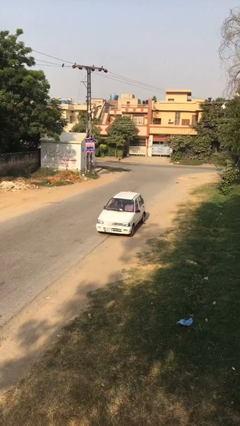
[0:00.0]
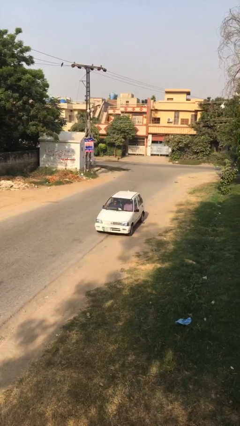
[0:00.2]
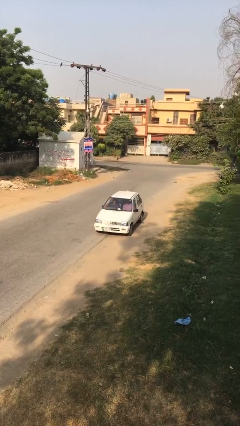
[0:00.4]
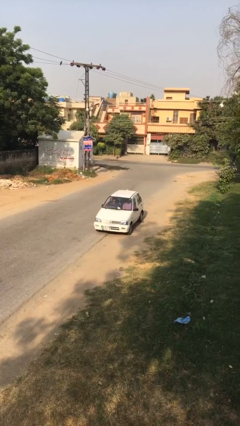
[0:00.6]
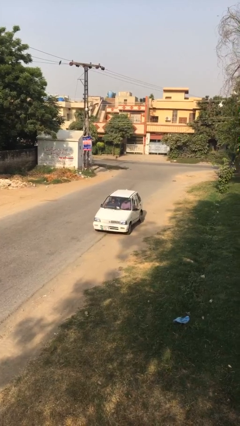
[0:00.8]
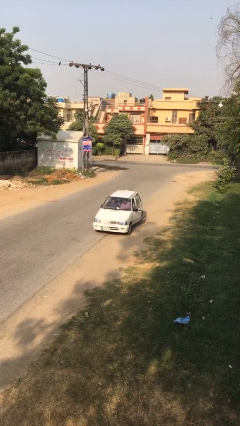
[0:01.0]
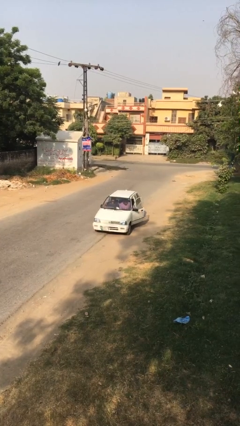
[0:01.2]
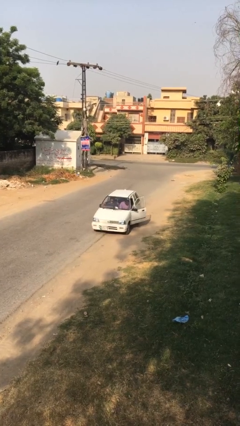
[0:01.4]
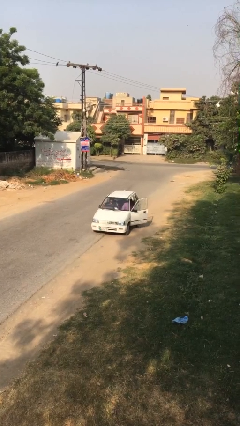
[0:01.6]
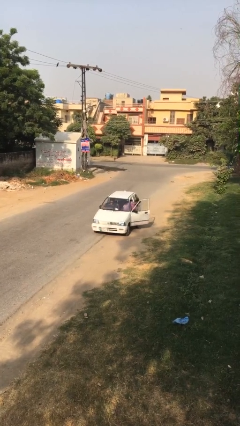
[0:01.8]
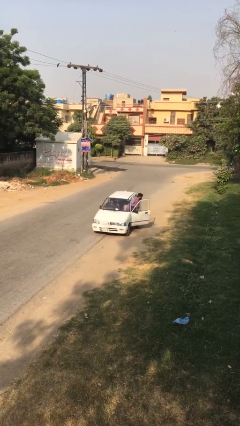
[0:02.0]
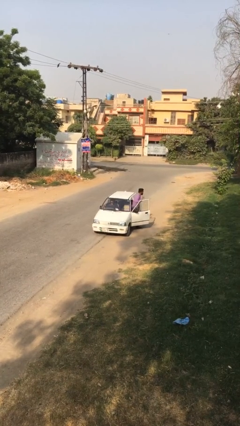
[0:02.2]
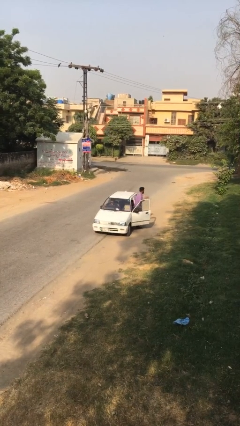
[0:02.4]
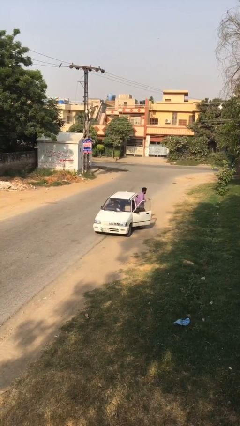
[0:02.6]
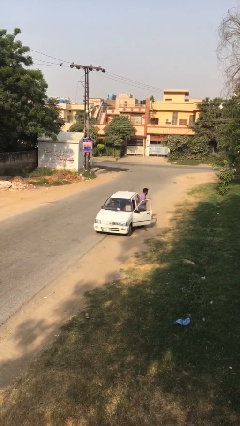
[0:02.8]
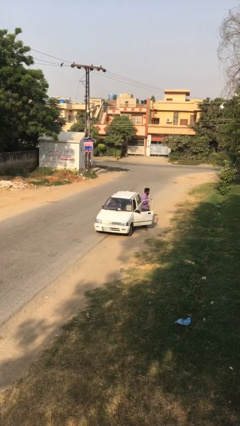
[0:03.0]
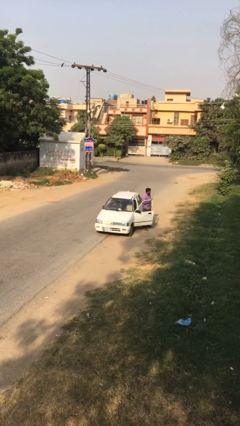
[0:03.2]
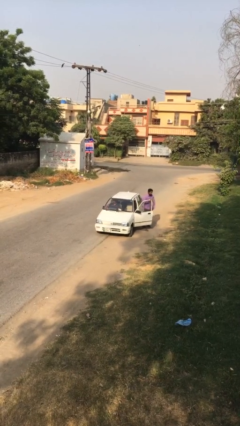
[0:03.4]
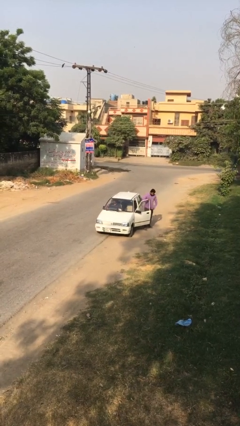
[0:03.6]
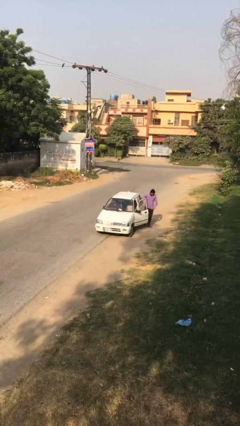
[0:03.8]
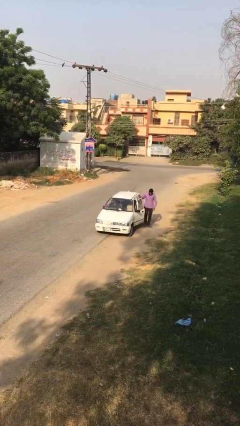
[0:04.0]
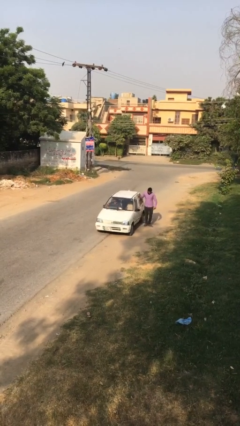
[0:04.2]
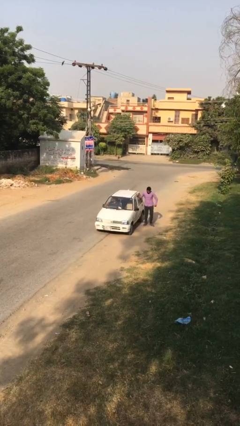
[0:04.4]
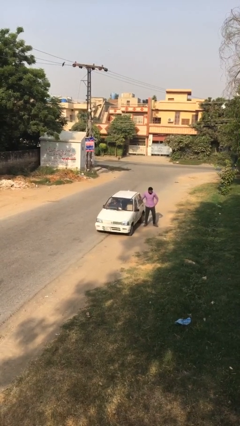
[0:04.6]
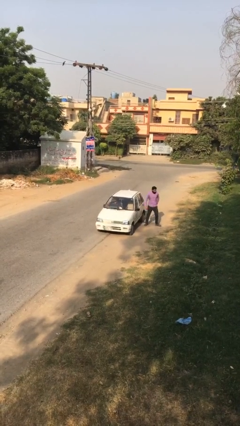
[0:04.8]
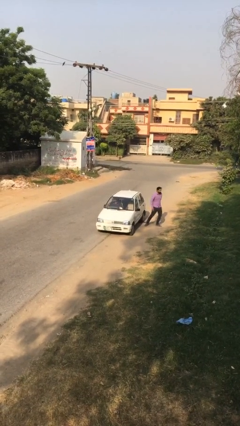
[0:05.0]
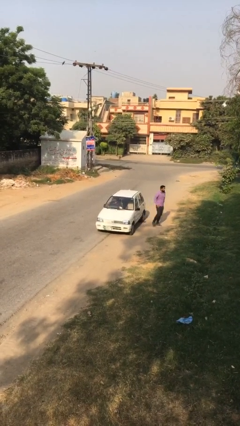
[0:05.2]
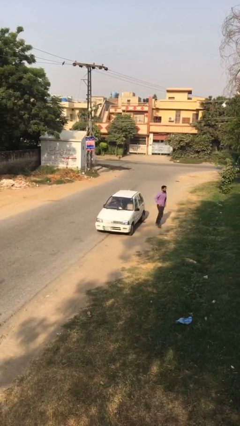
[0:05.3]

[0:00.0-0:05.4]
car drops off person

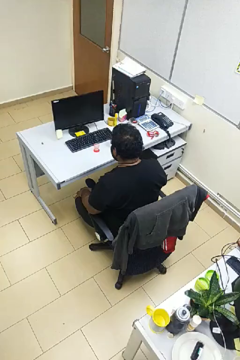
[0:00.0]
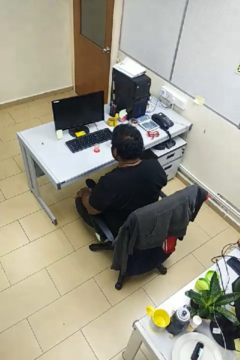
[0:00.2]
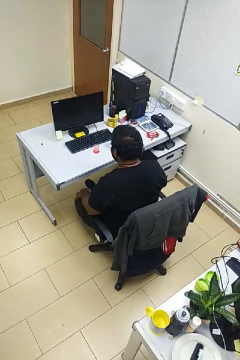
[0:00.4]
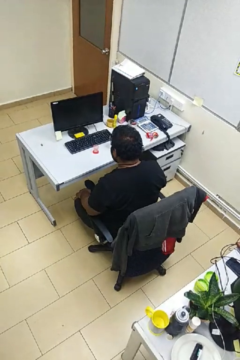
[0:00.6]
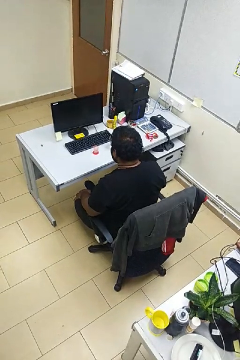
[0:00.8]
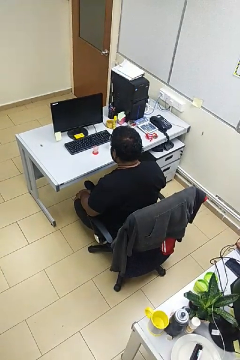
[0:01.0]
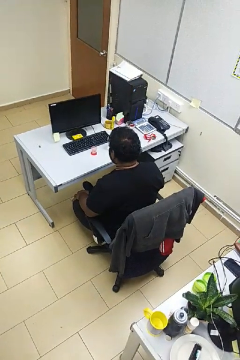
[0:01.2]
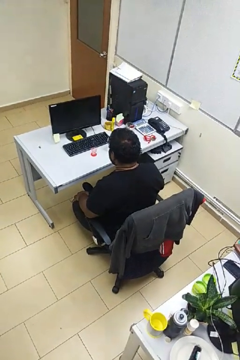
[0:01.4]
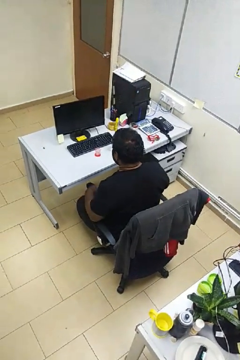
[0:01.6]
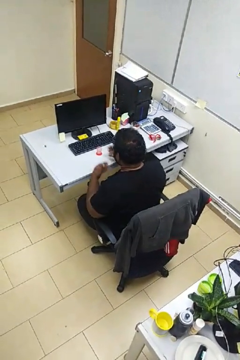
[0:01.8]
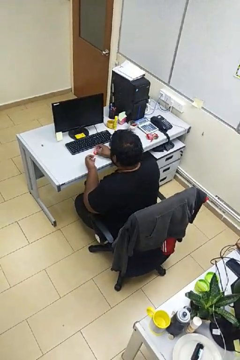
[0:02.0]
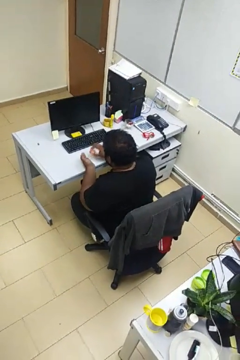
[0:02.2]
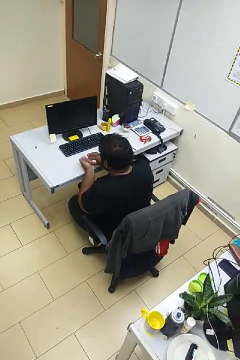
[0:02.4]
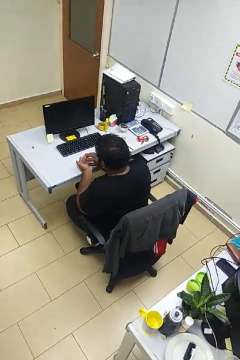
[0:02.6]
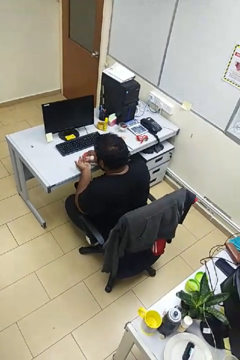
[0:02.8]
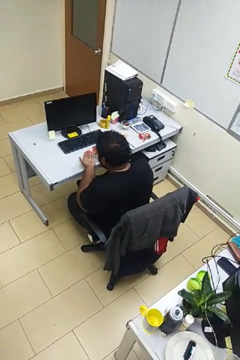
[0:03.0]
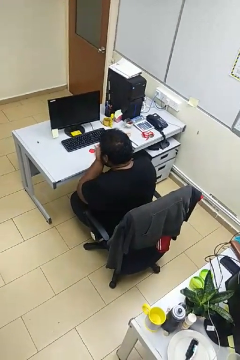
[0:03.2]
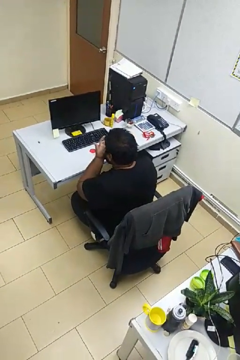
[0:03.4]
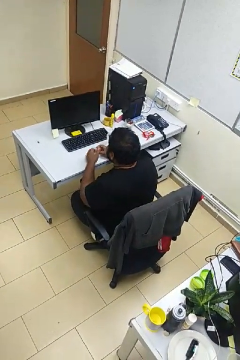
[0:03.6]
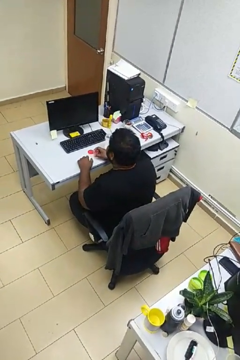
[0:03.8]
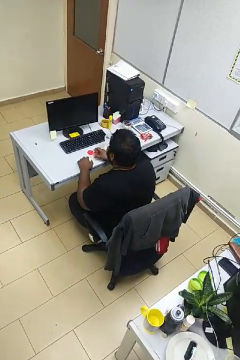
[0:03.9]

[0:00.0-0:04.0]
person takes medicine pills

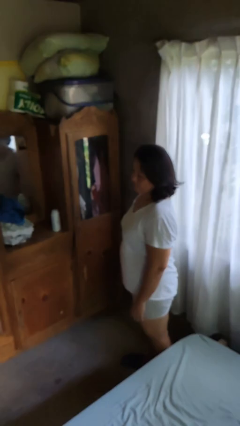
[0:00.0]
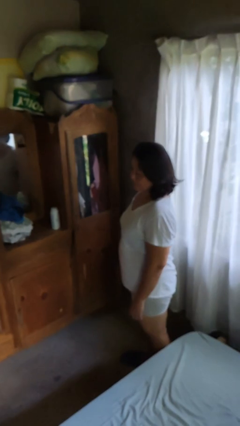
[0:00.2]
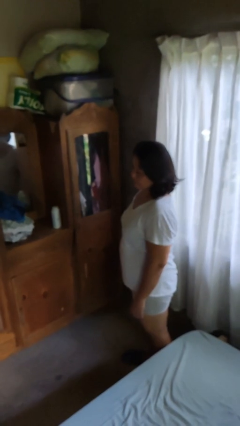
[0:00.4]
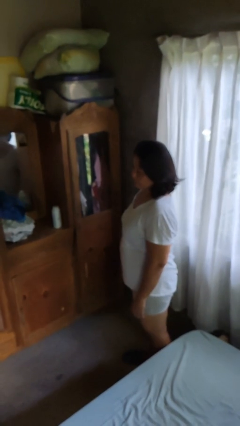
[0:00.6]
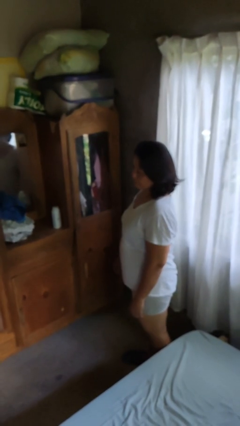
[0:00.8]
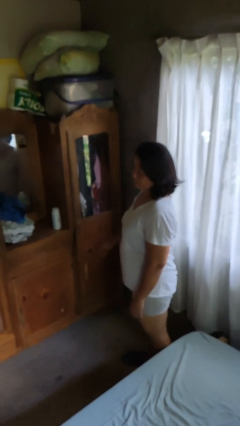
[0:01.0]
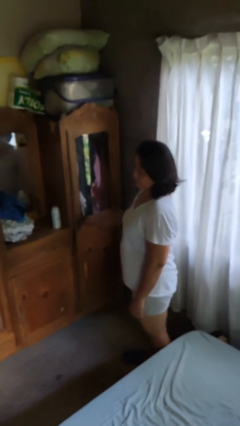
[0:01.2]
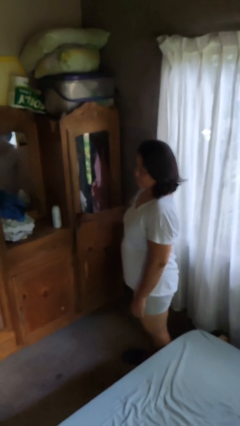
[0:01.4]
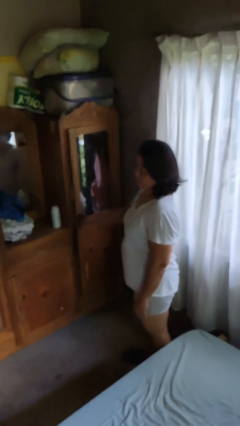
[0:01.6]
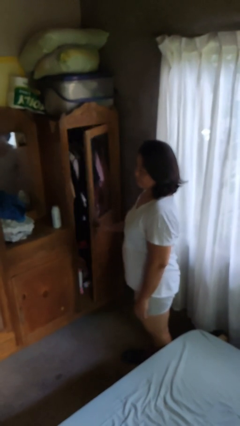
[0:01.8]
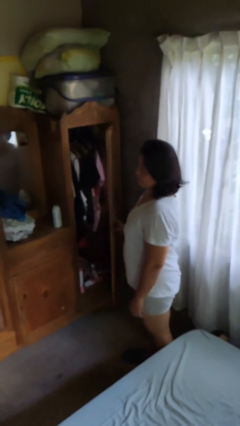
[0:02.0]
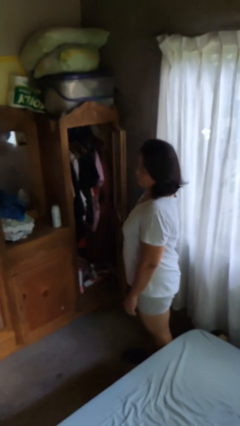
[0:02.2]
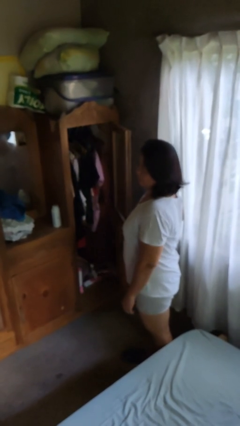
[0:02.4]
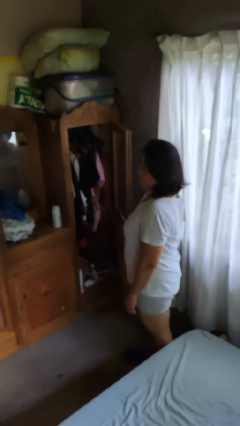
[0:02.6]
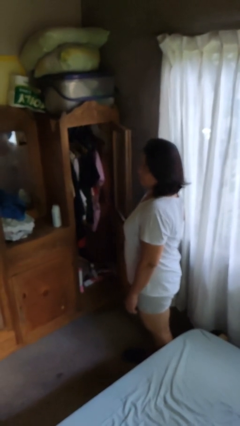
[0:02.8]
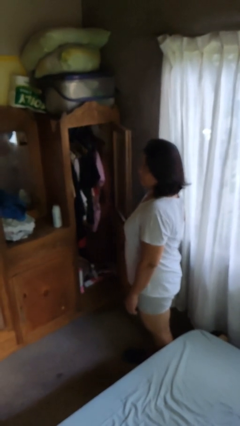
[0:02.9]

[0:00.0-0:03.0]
person opens dresser drawer

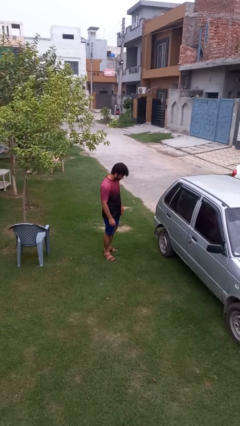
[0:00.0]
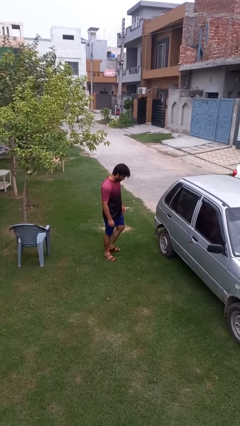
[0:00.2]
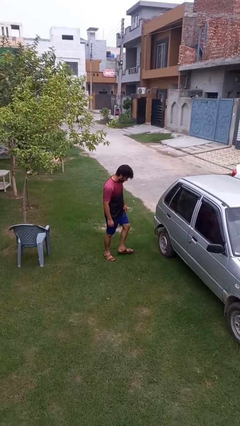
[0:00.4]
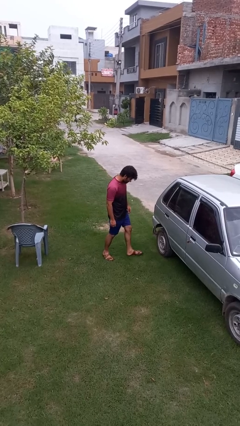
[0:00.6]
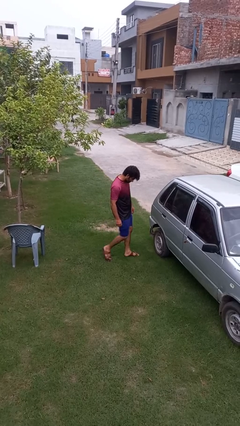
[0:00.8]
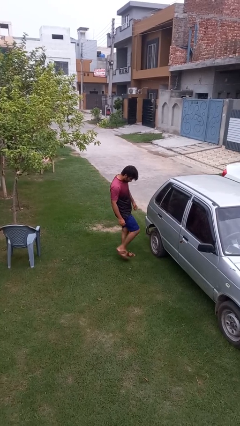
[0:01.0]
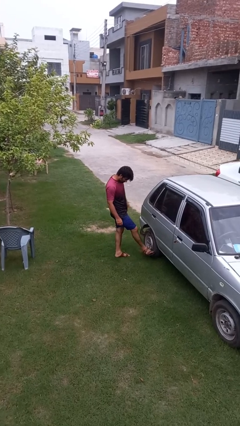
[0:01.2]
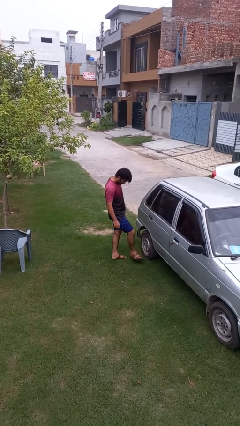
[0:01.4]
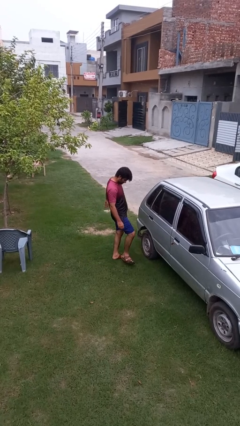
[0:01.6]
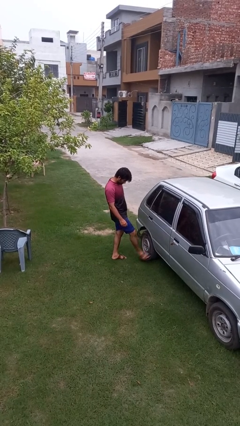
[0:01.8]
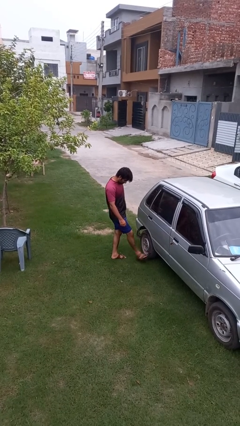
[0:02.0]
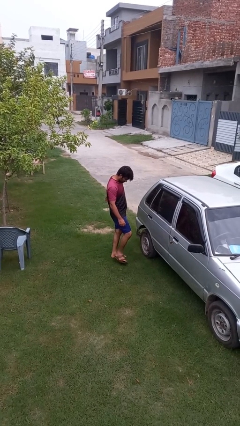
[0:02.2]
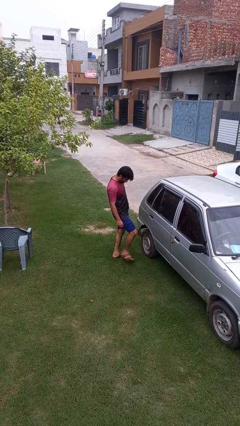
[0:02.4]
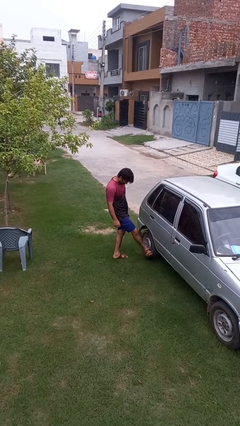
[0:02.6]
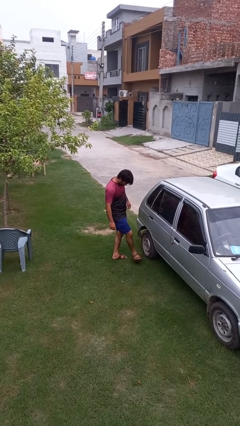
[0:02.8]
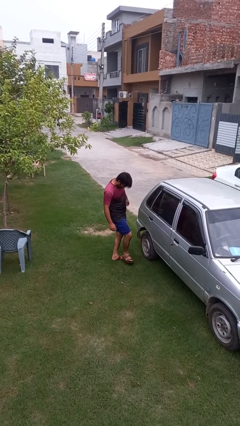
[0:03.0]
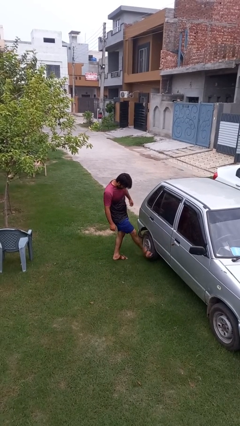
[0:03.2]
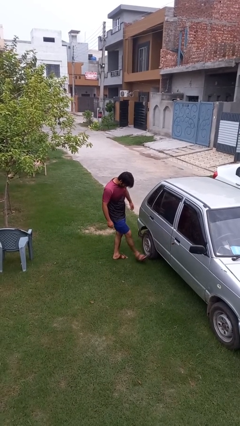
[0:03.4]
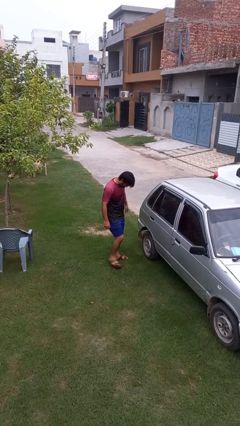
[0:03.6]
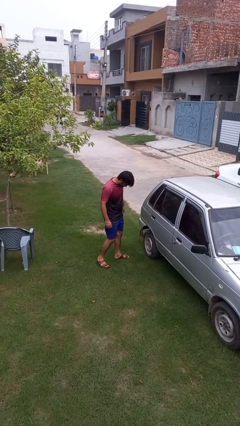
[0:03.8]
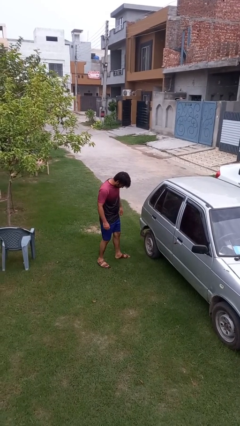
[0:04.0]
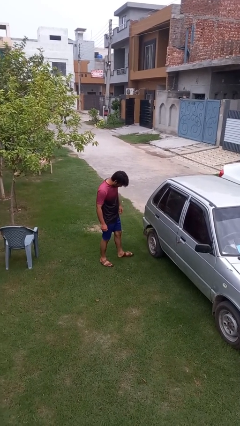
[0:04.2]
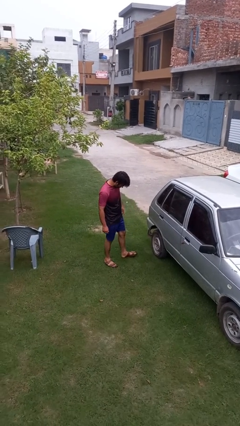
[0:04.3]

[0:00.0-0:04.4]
person kicks car tires

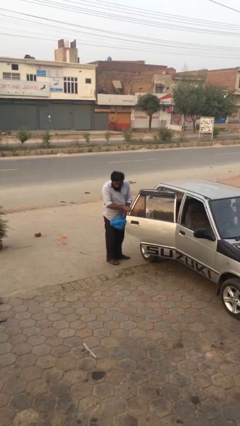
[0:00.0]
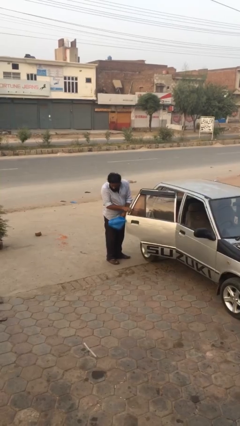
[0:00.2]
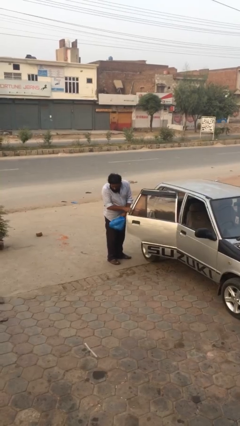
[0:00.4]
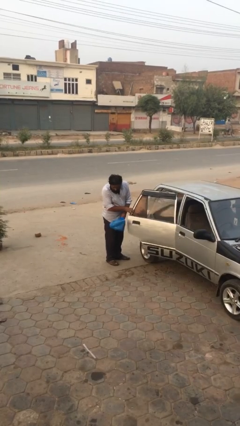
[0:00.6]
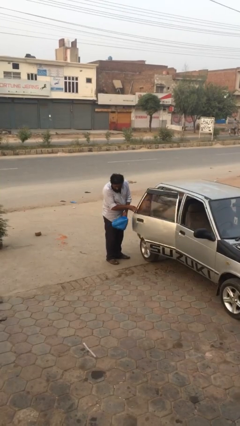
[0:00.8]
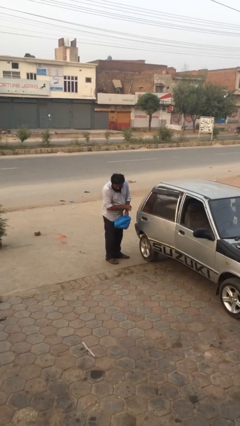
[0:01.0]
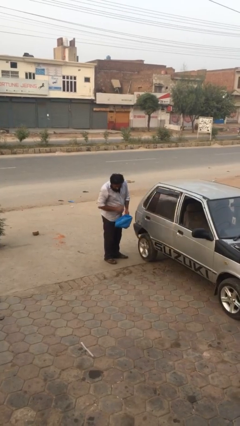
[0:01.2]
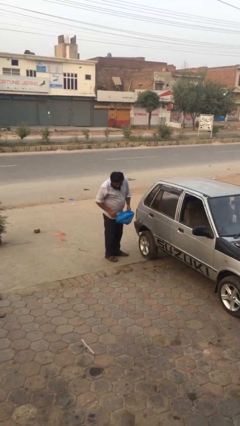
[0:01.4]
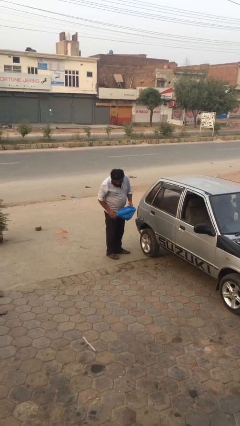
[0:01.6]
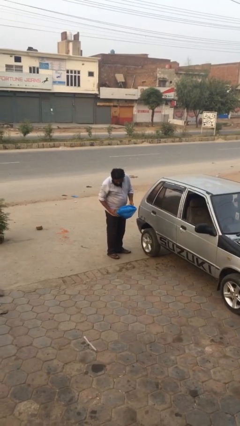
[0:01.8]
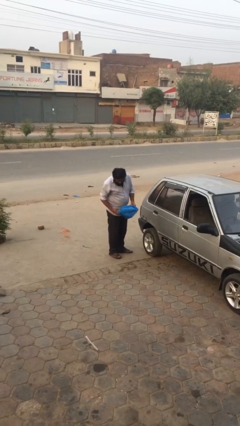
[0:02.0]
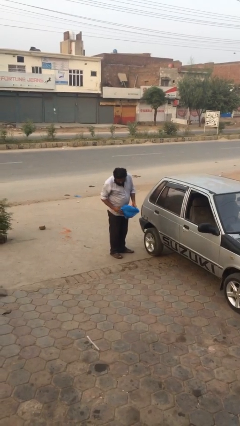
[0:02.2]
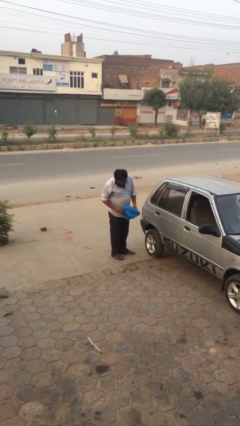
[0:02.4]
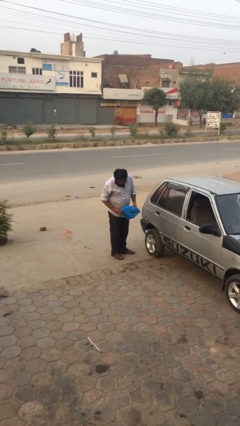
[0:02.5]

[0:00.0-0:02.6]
person closes car door
